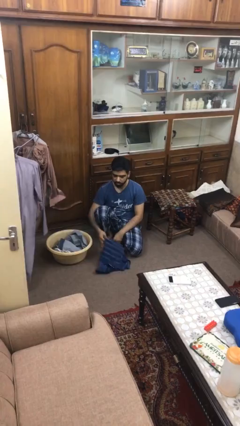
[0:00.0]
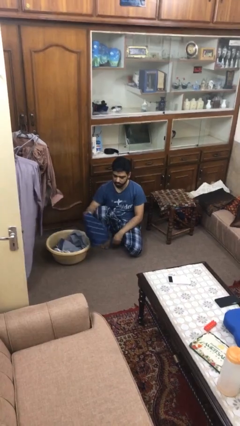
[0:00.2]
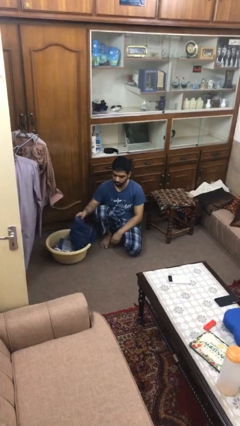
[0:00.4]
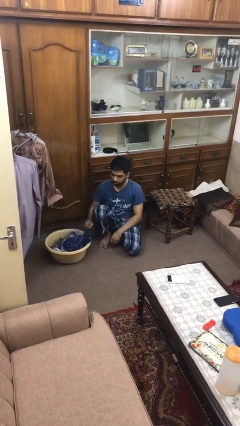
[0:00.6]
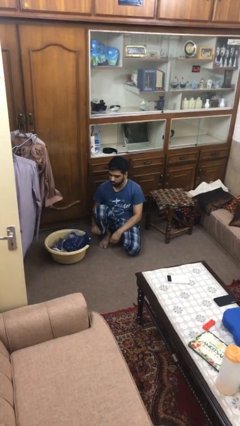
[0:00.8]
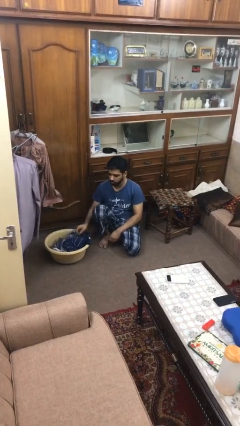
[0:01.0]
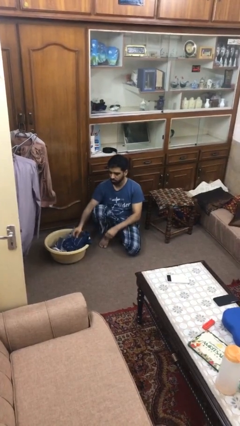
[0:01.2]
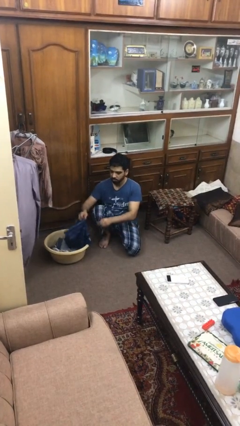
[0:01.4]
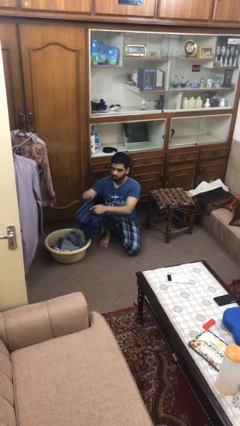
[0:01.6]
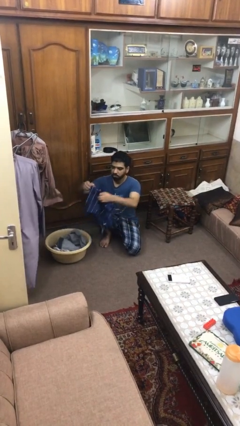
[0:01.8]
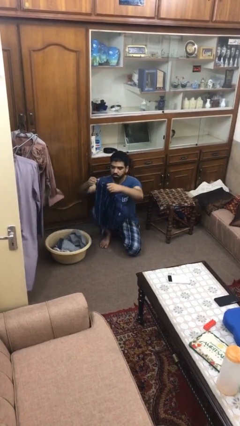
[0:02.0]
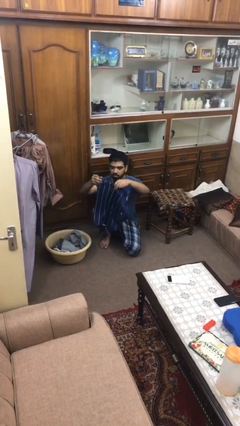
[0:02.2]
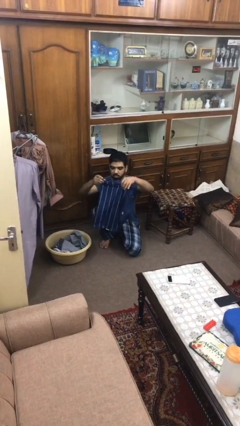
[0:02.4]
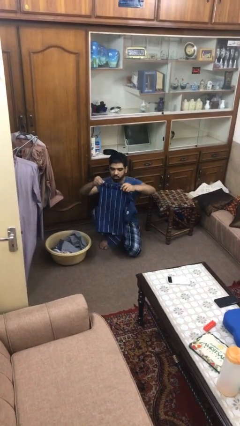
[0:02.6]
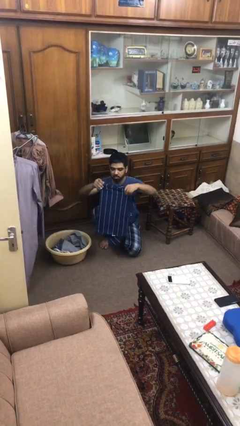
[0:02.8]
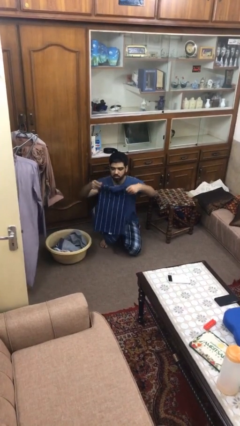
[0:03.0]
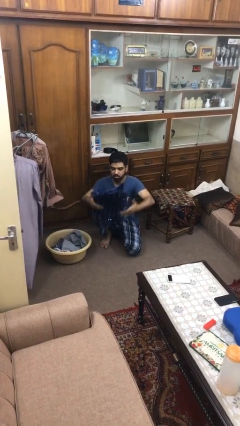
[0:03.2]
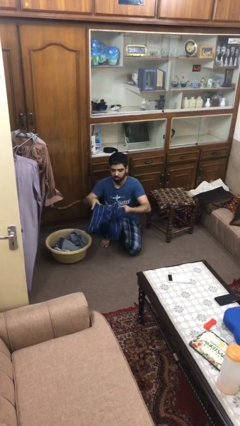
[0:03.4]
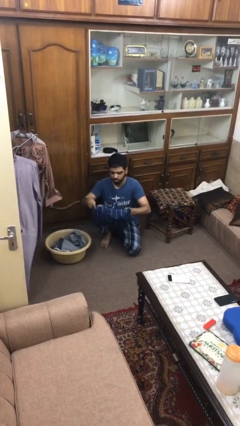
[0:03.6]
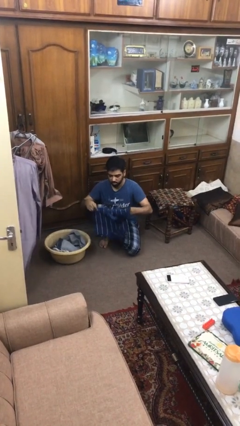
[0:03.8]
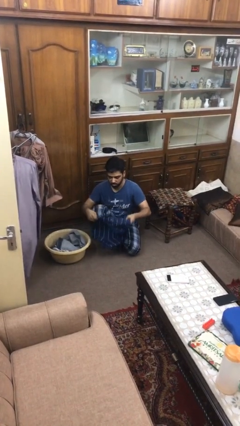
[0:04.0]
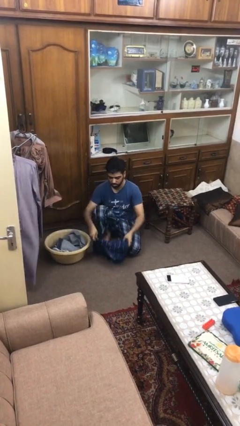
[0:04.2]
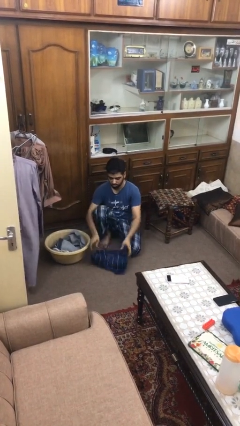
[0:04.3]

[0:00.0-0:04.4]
person folds shirt

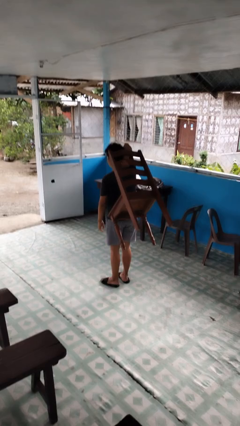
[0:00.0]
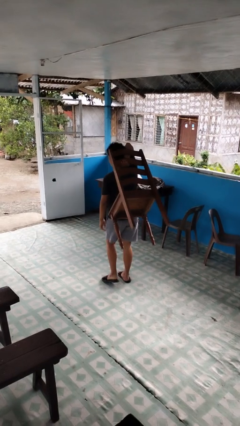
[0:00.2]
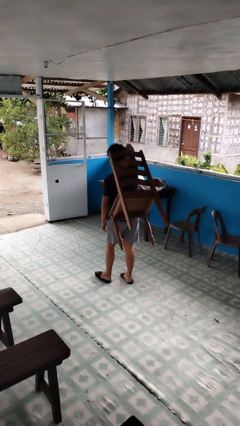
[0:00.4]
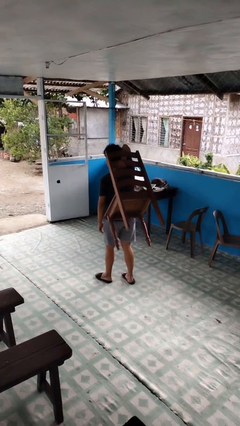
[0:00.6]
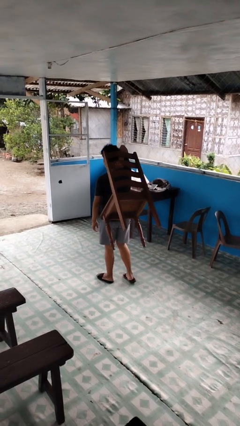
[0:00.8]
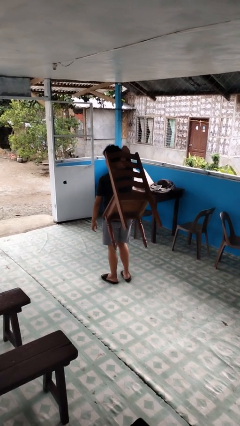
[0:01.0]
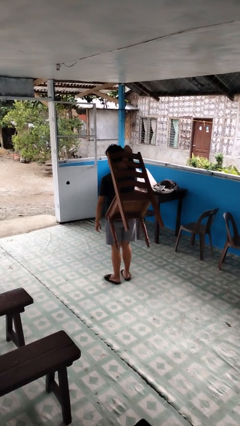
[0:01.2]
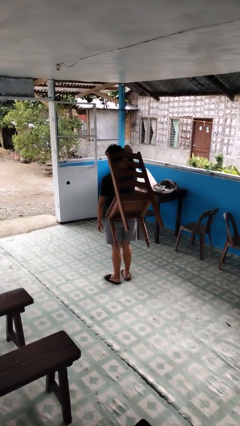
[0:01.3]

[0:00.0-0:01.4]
person carries furniture

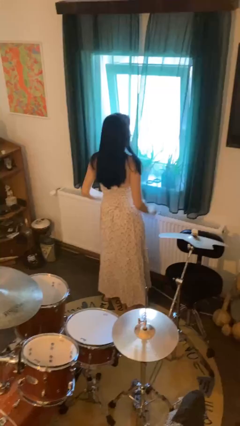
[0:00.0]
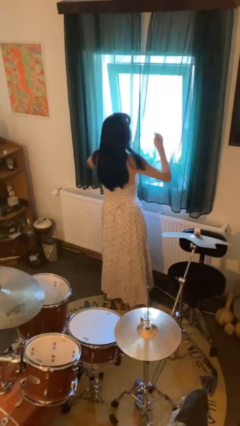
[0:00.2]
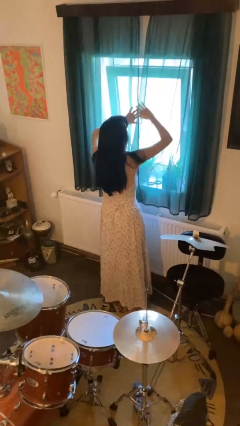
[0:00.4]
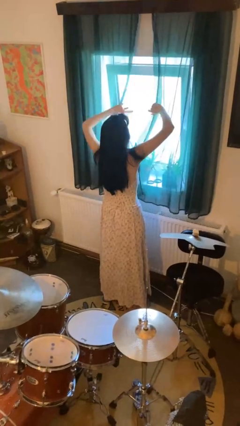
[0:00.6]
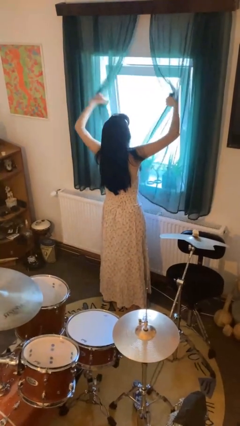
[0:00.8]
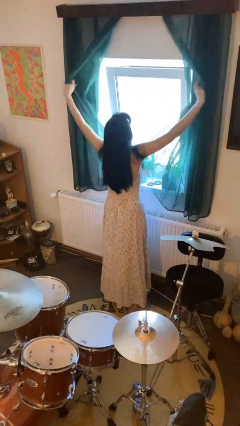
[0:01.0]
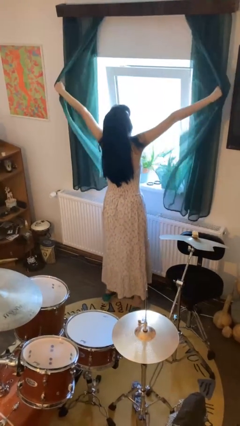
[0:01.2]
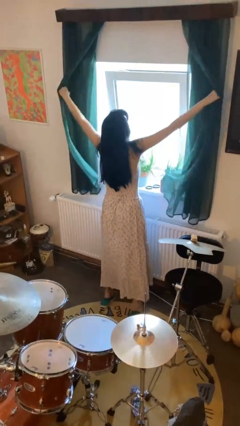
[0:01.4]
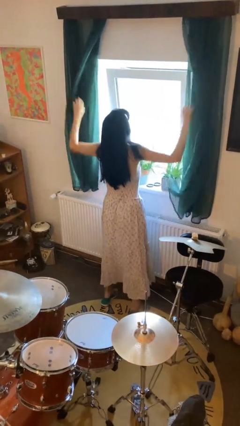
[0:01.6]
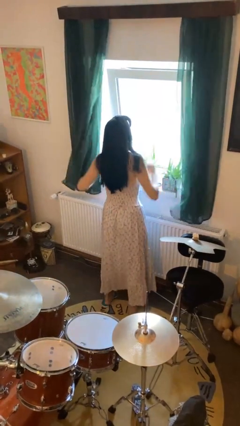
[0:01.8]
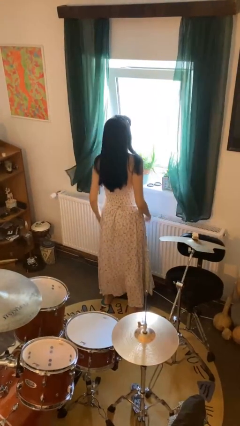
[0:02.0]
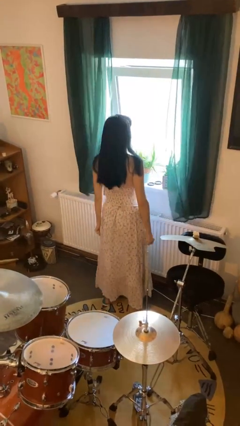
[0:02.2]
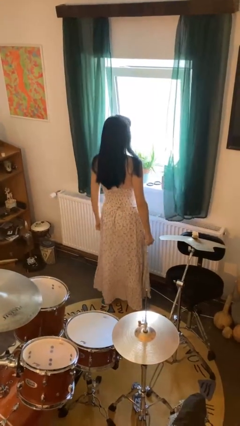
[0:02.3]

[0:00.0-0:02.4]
person opens curtains

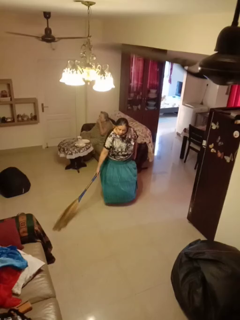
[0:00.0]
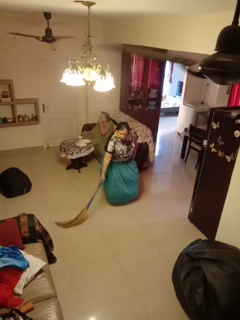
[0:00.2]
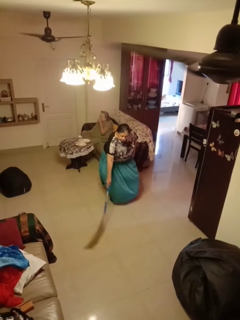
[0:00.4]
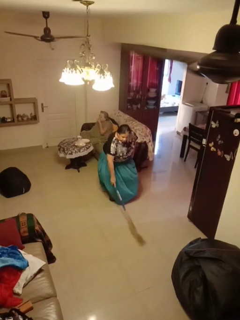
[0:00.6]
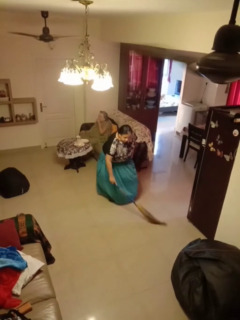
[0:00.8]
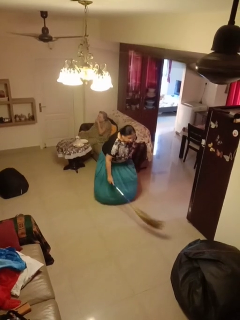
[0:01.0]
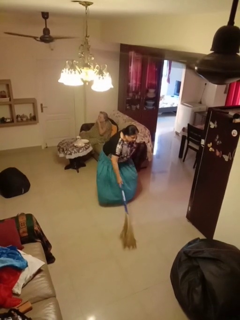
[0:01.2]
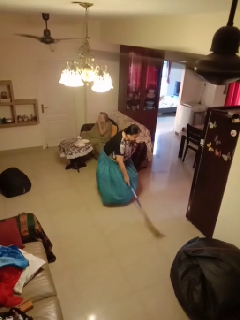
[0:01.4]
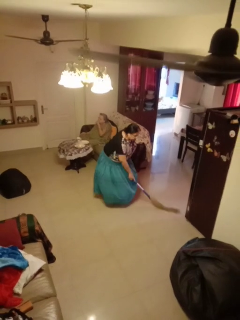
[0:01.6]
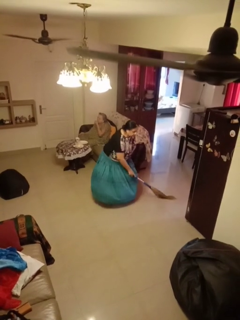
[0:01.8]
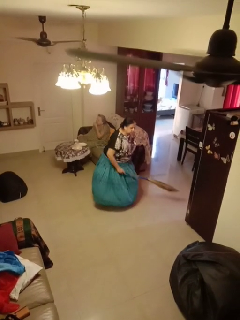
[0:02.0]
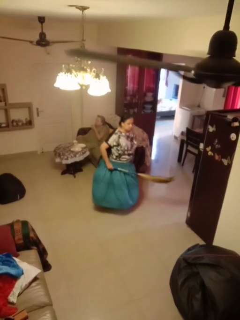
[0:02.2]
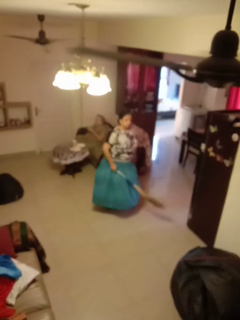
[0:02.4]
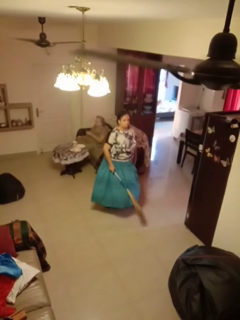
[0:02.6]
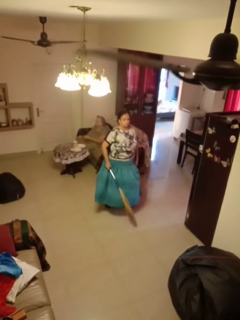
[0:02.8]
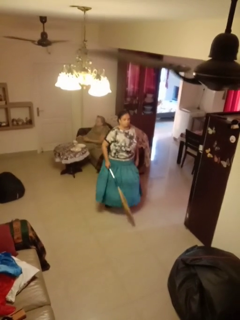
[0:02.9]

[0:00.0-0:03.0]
person sweeps floor

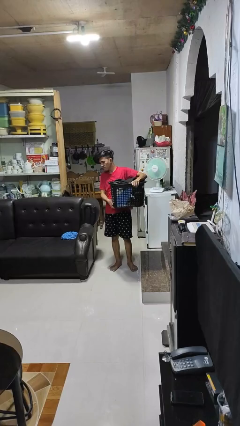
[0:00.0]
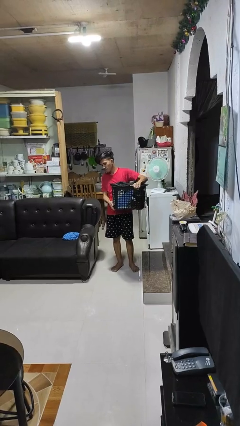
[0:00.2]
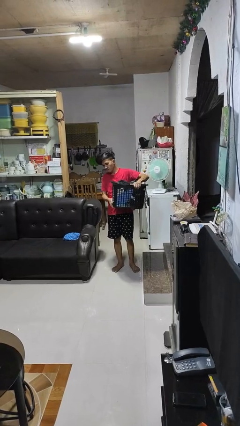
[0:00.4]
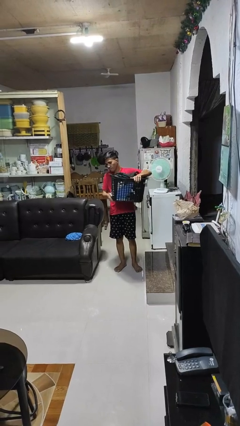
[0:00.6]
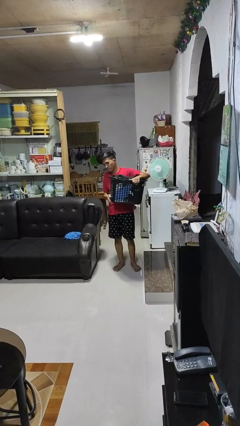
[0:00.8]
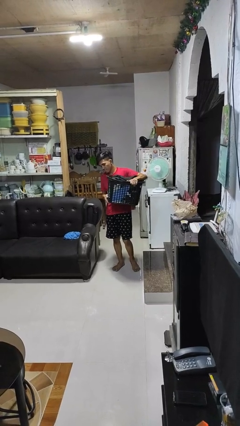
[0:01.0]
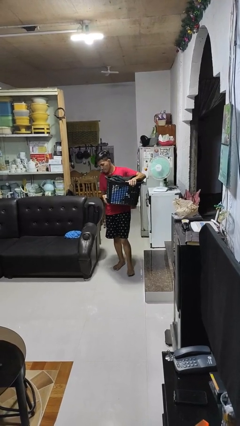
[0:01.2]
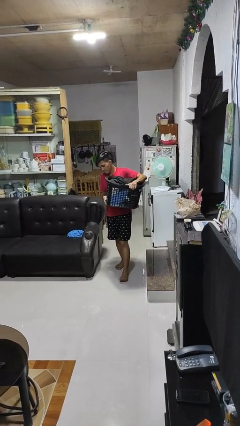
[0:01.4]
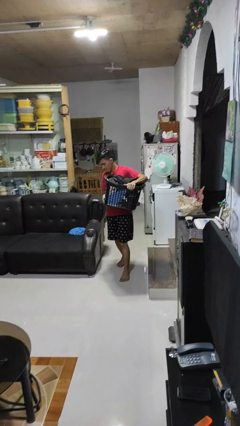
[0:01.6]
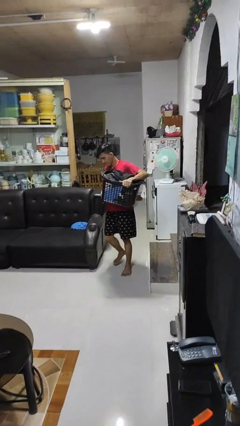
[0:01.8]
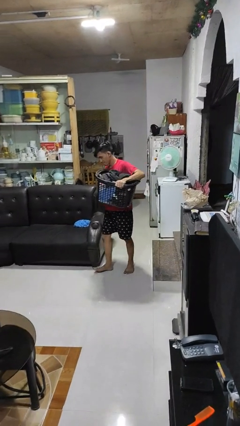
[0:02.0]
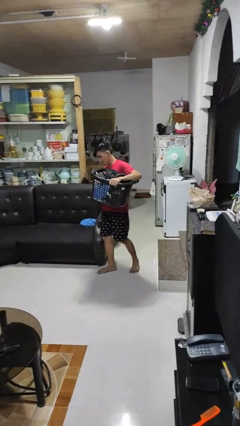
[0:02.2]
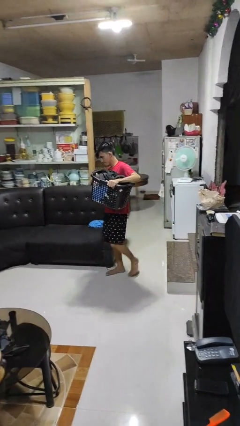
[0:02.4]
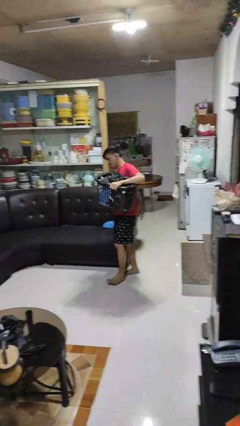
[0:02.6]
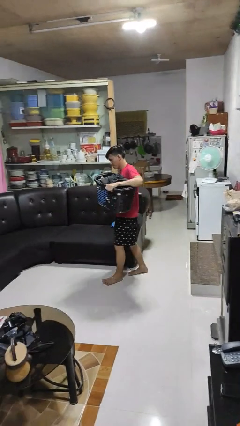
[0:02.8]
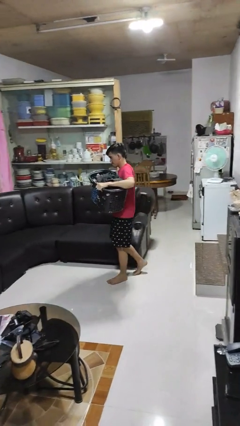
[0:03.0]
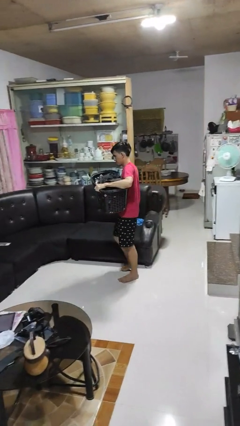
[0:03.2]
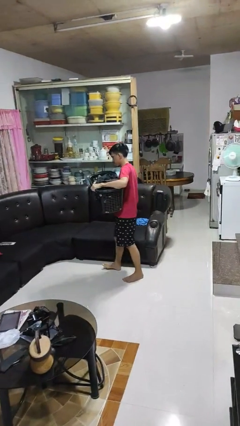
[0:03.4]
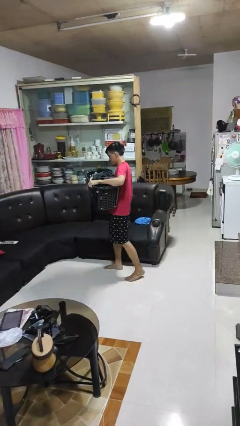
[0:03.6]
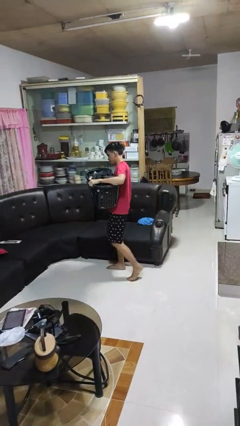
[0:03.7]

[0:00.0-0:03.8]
person carries laundry basket

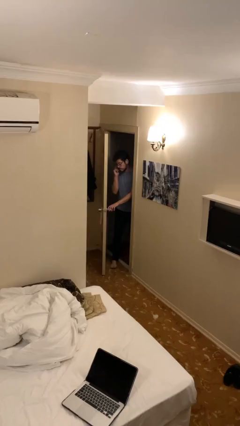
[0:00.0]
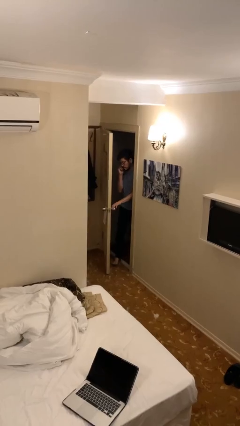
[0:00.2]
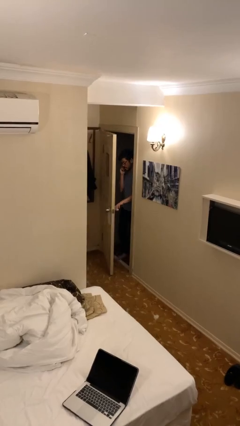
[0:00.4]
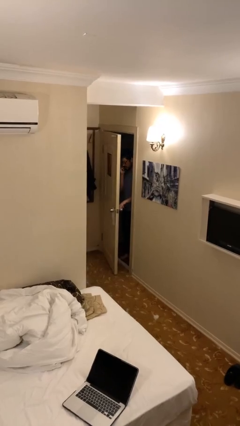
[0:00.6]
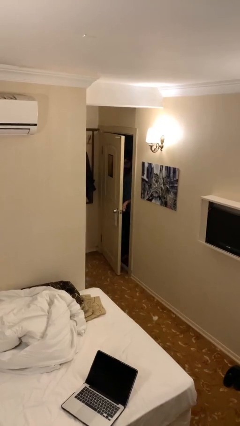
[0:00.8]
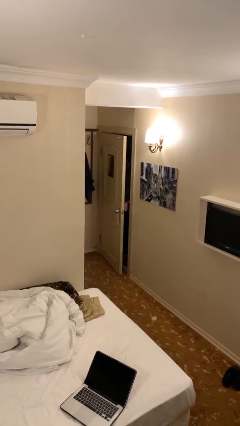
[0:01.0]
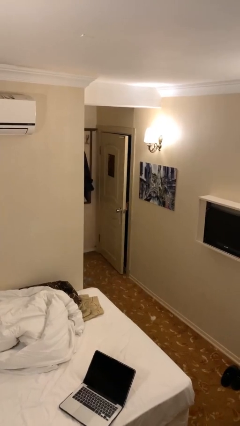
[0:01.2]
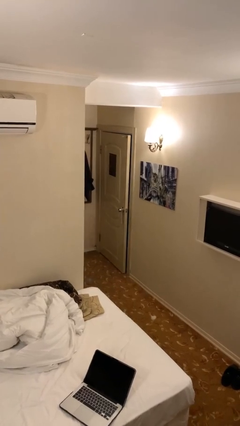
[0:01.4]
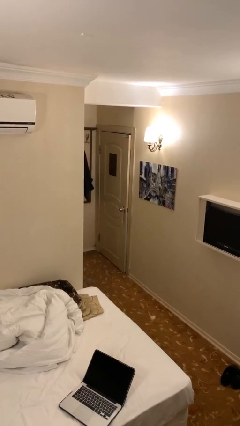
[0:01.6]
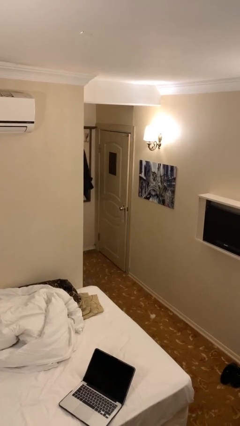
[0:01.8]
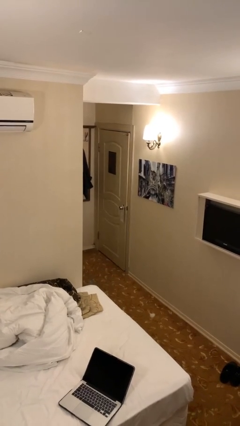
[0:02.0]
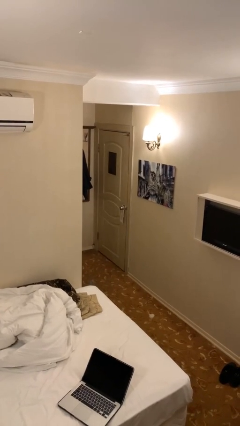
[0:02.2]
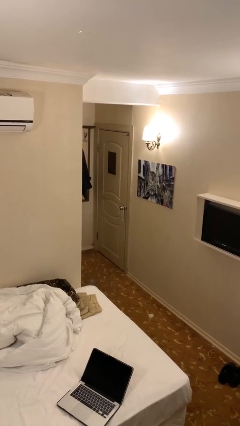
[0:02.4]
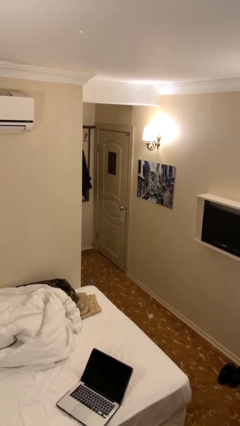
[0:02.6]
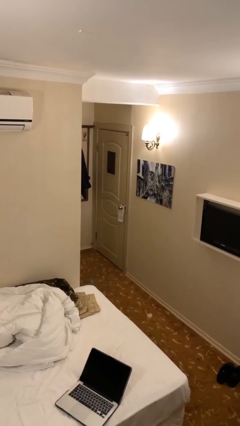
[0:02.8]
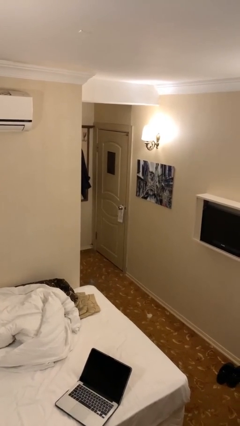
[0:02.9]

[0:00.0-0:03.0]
person closes facility door
